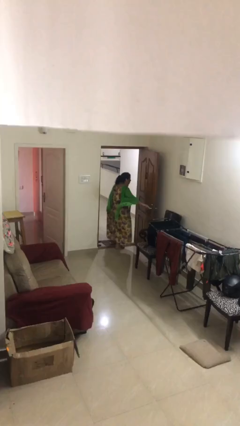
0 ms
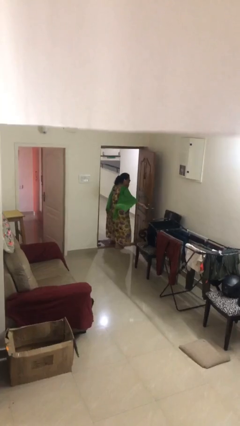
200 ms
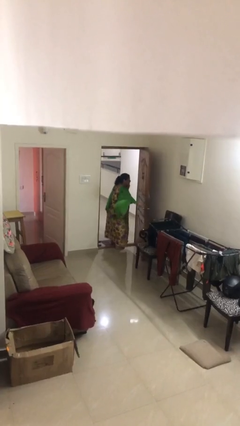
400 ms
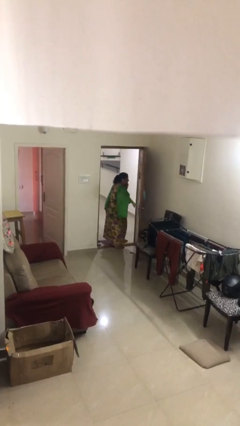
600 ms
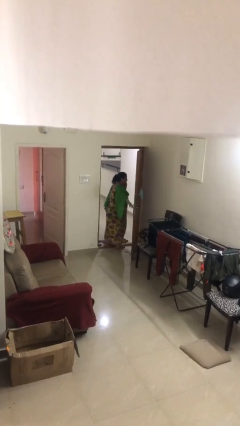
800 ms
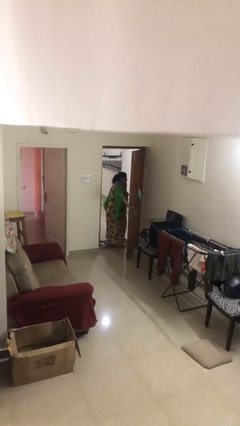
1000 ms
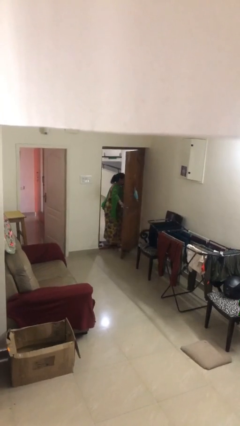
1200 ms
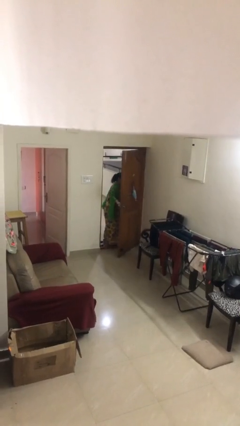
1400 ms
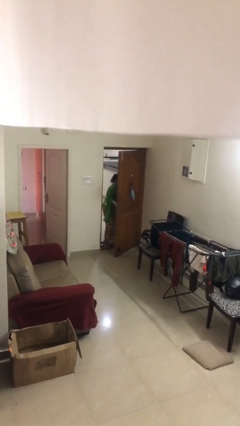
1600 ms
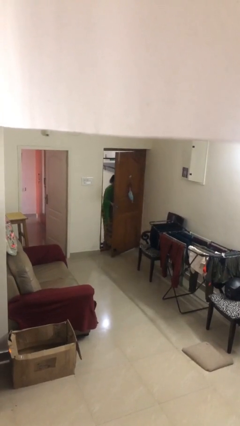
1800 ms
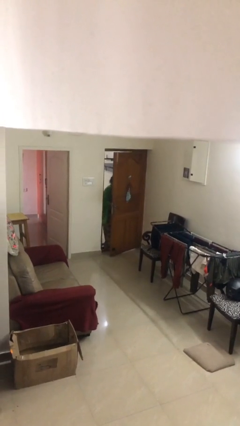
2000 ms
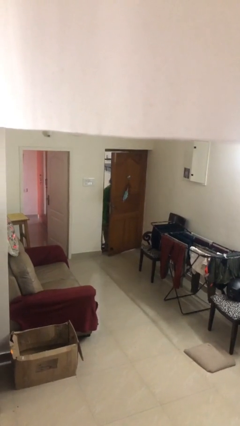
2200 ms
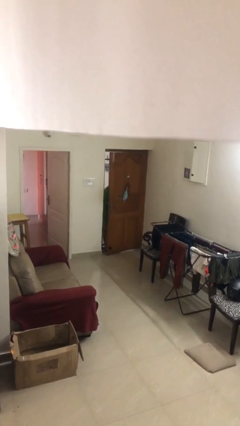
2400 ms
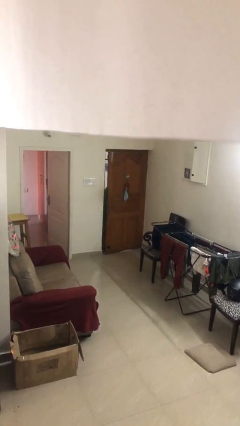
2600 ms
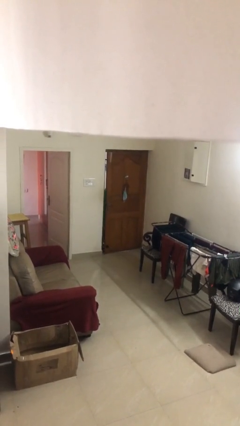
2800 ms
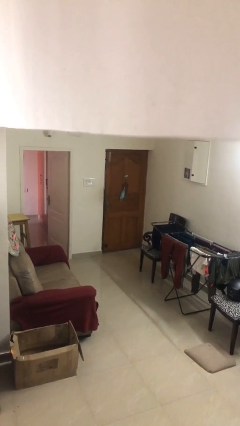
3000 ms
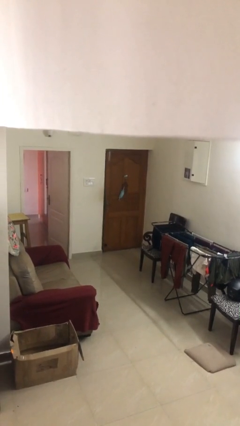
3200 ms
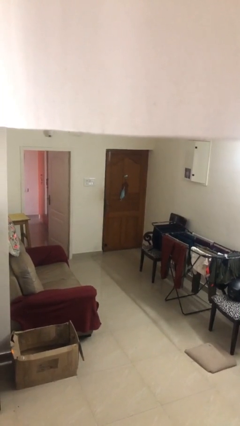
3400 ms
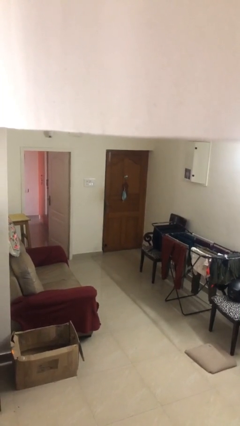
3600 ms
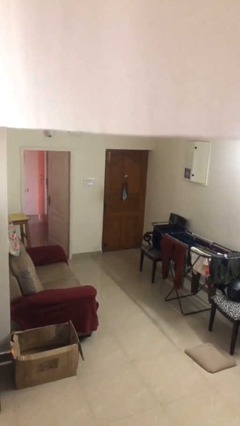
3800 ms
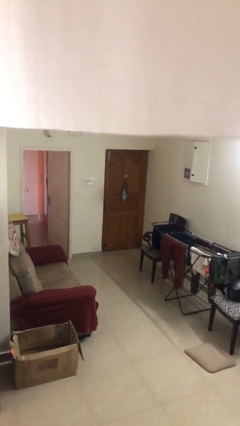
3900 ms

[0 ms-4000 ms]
person closes facility door

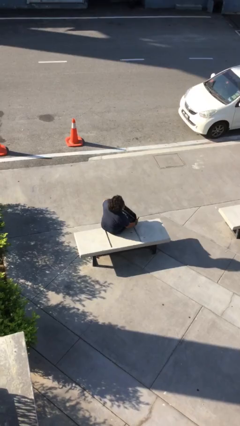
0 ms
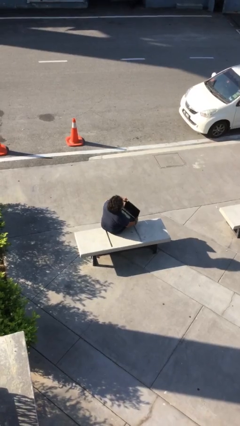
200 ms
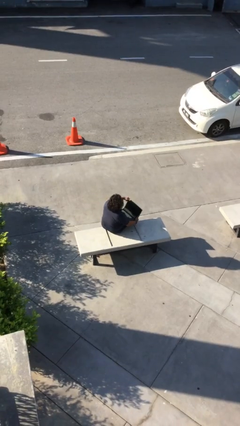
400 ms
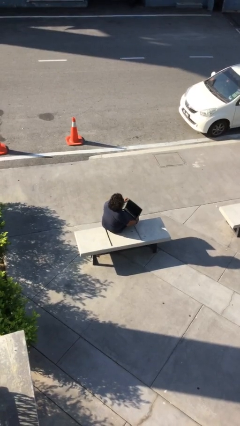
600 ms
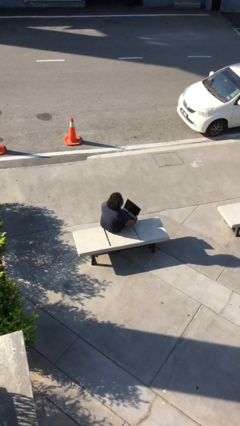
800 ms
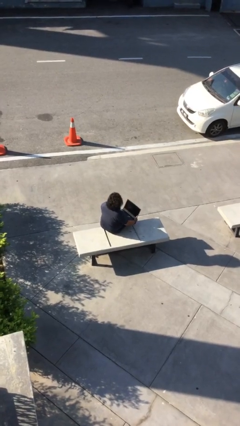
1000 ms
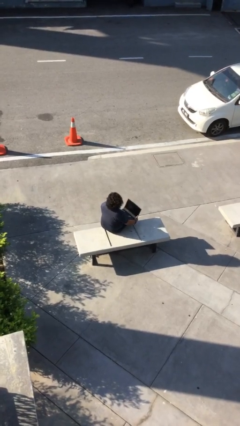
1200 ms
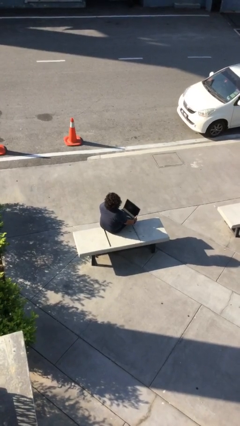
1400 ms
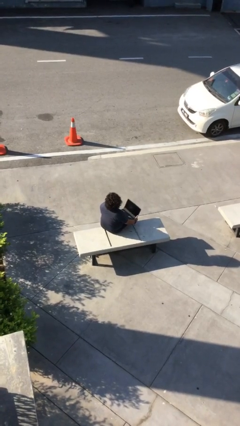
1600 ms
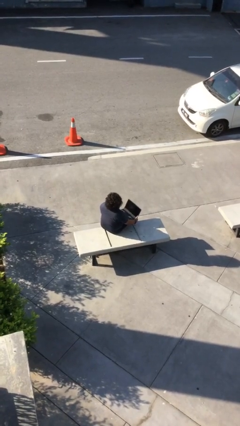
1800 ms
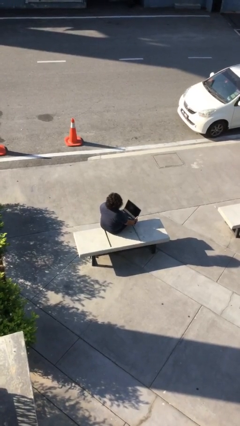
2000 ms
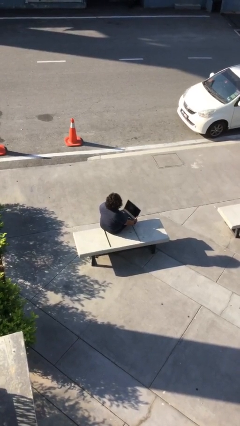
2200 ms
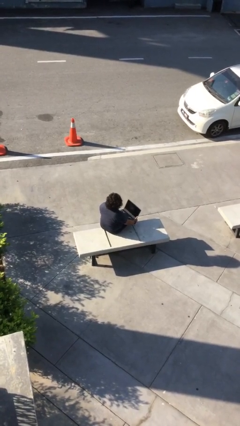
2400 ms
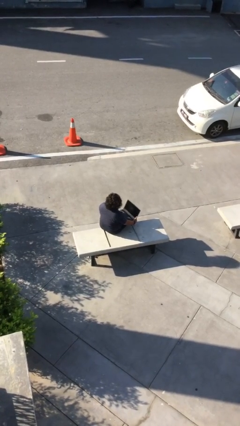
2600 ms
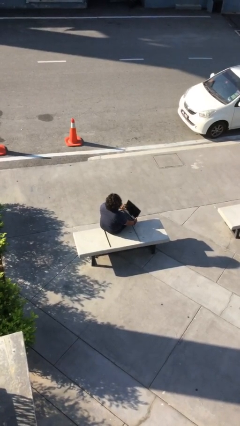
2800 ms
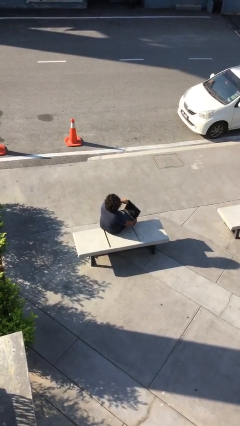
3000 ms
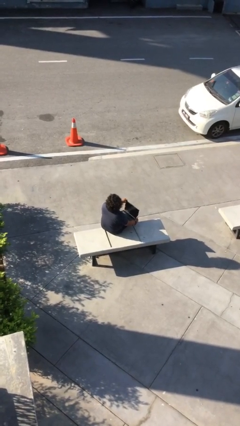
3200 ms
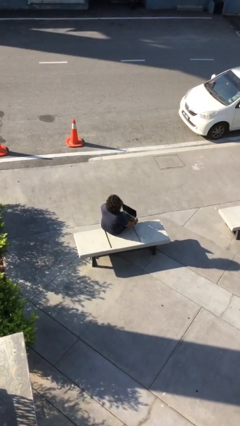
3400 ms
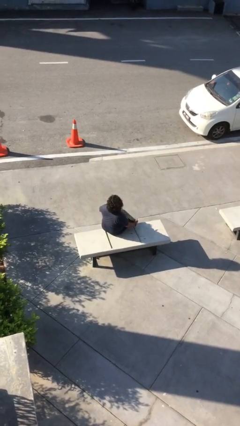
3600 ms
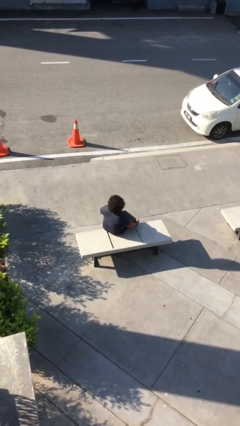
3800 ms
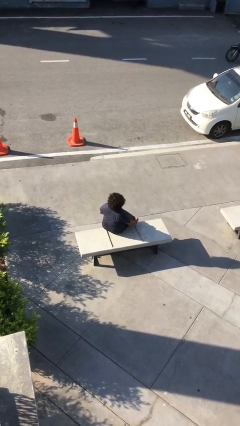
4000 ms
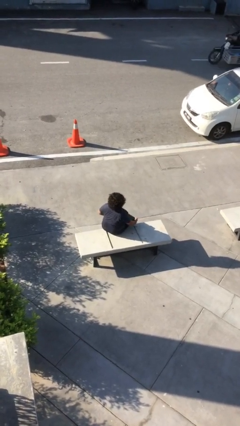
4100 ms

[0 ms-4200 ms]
person interacts with laptop

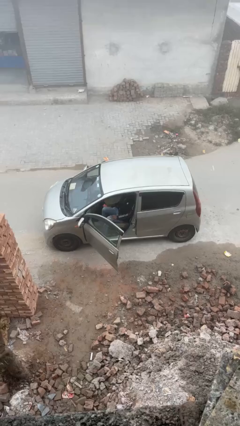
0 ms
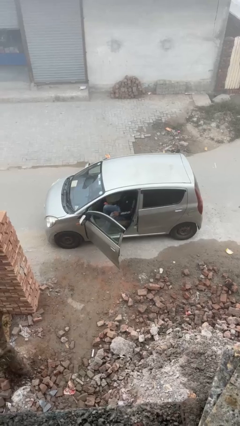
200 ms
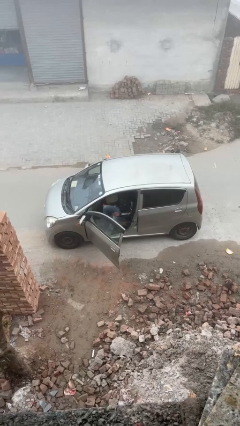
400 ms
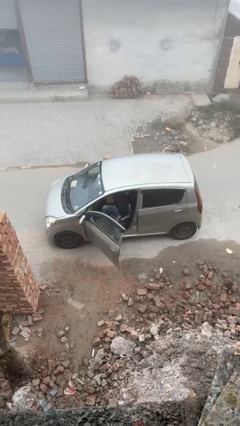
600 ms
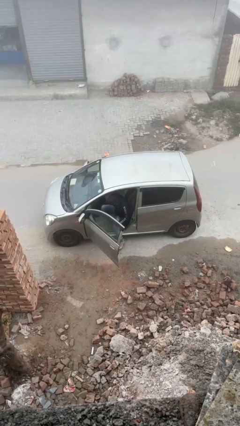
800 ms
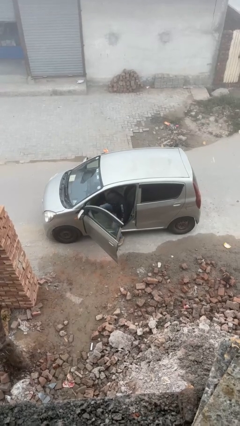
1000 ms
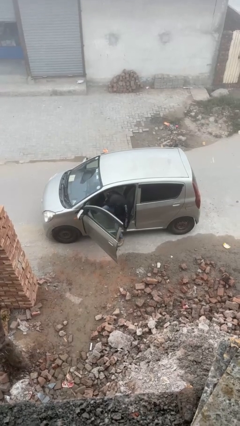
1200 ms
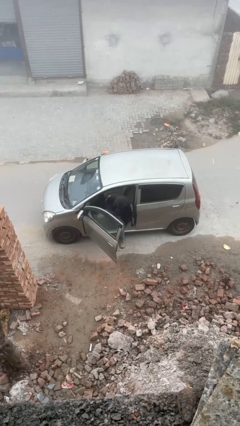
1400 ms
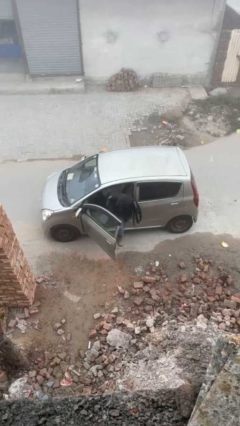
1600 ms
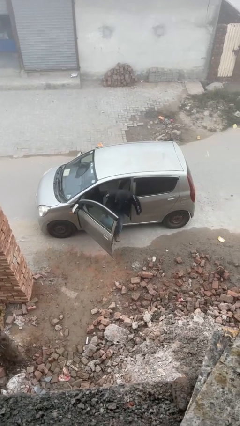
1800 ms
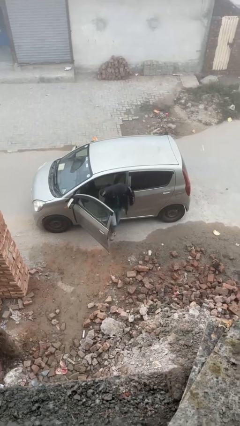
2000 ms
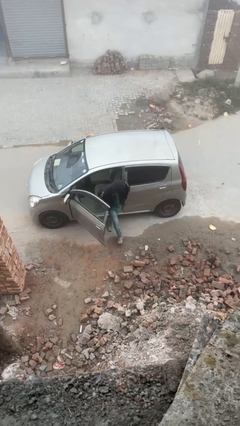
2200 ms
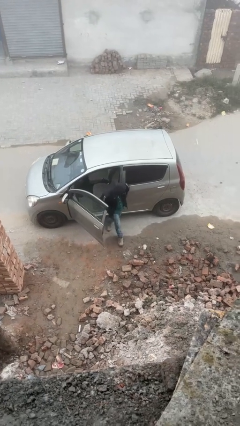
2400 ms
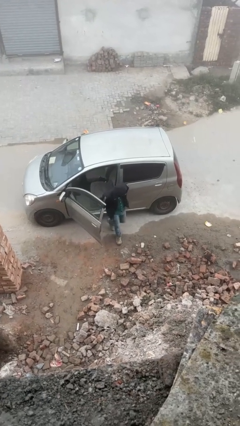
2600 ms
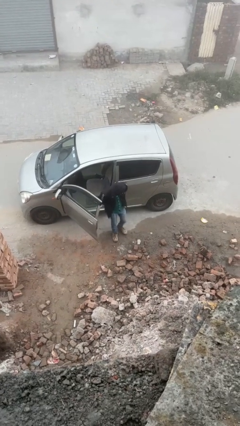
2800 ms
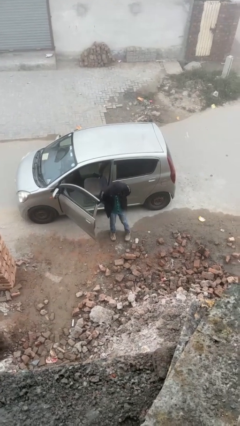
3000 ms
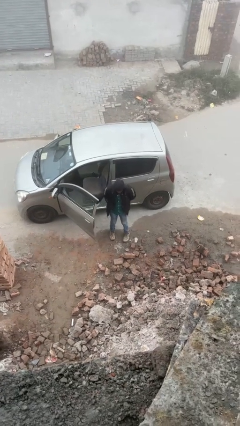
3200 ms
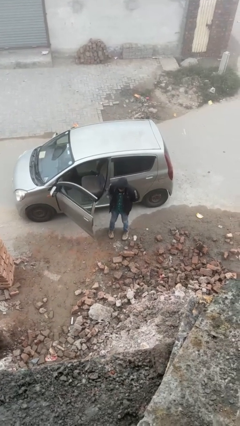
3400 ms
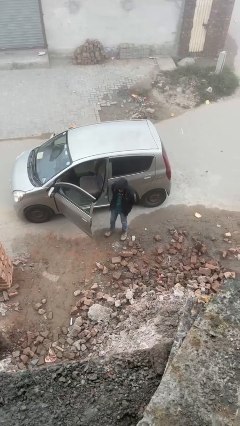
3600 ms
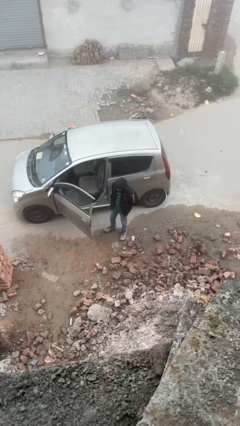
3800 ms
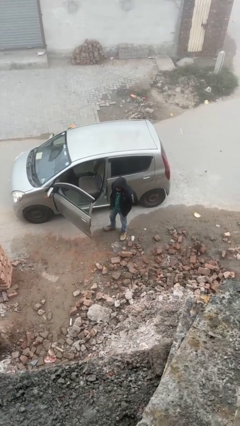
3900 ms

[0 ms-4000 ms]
person exits car

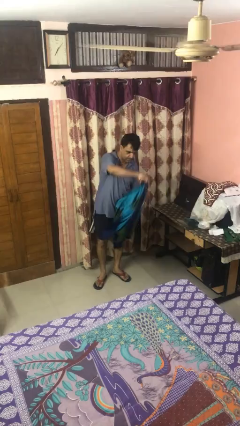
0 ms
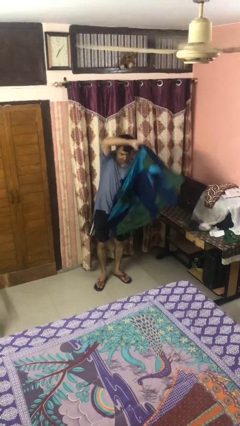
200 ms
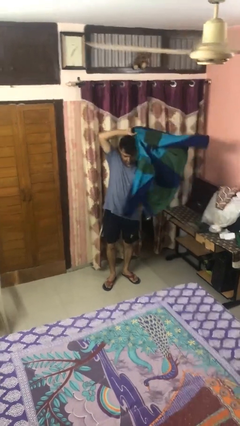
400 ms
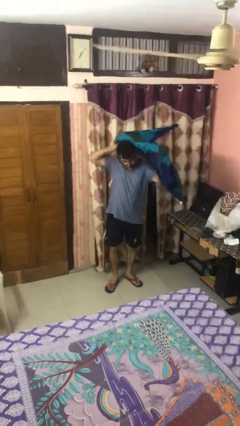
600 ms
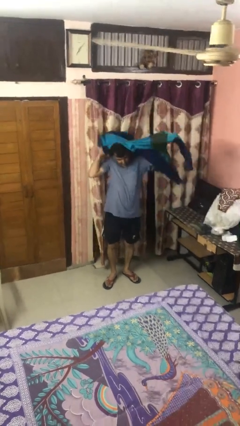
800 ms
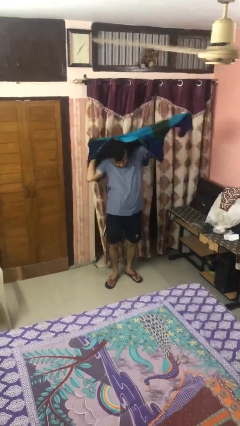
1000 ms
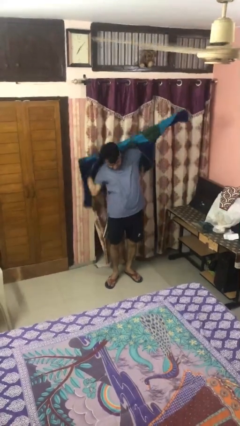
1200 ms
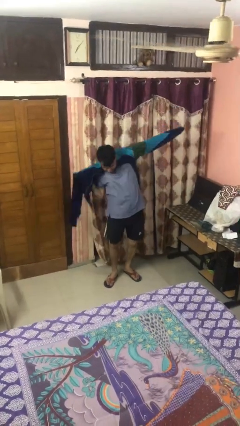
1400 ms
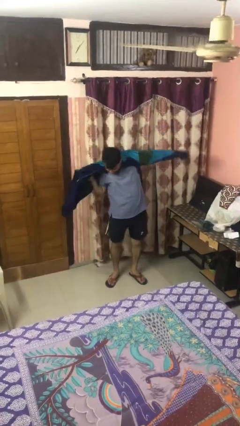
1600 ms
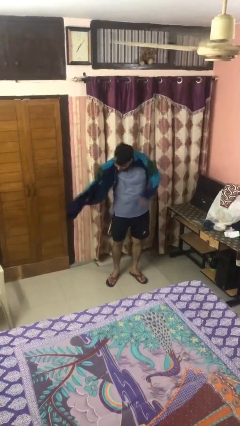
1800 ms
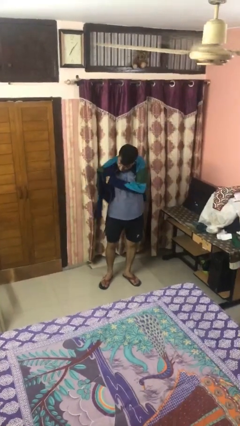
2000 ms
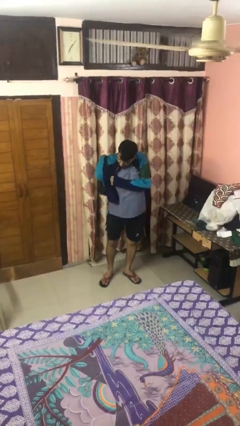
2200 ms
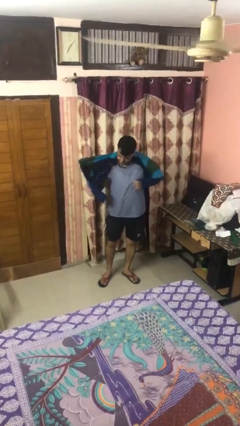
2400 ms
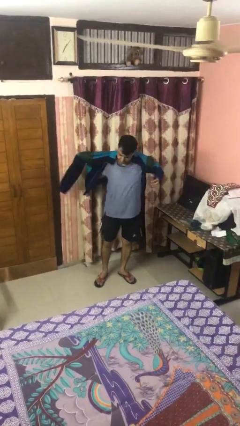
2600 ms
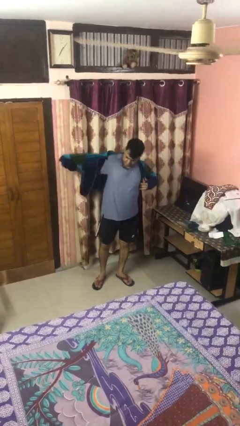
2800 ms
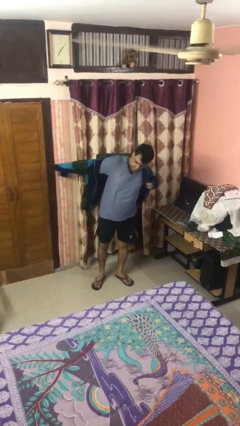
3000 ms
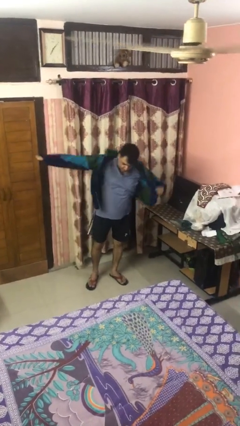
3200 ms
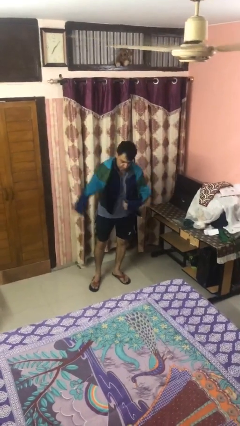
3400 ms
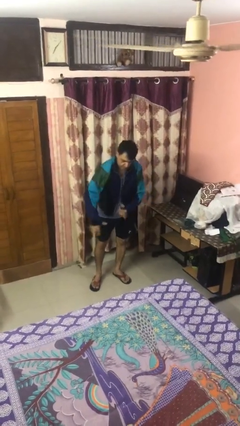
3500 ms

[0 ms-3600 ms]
person puts on jacket

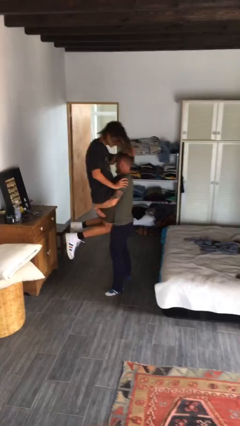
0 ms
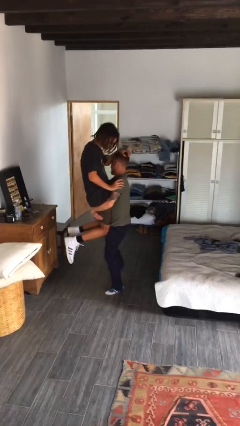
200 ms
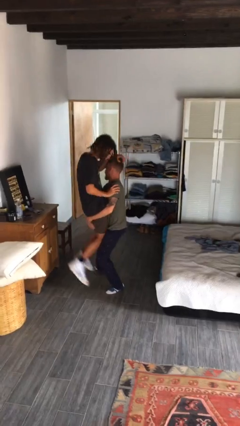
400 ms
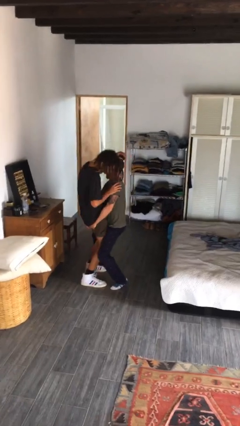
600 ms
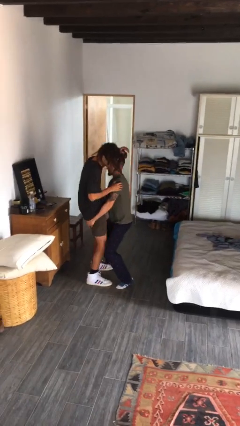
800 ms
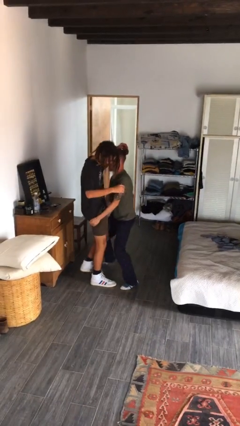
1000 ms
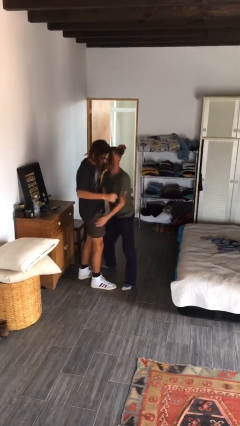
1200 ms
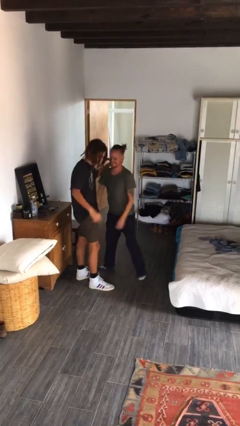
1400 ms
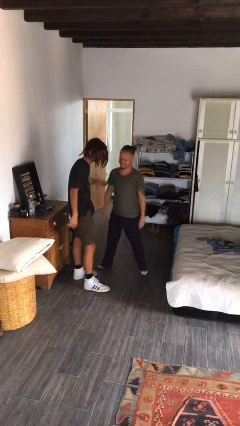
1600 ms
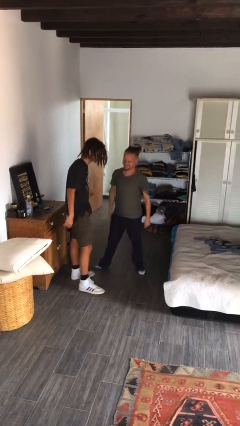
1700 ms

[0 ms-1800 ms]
person puts down person
